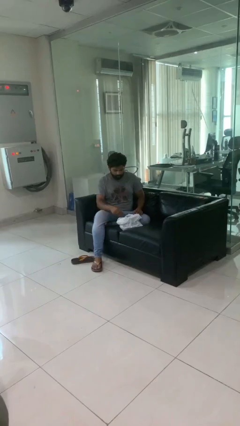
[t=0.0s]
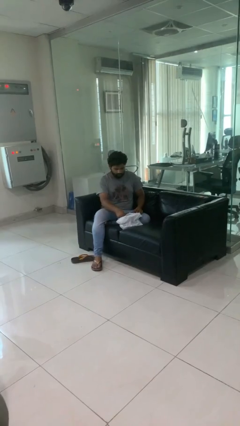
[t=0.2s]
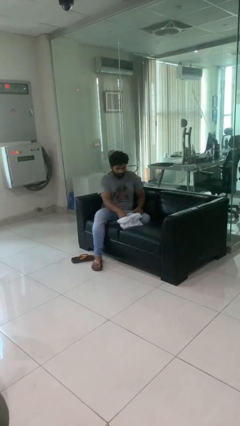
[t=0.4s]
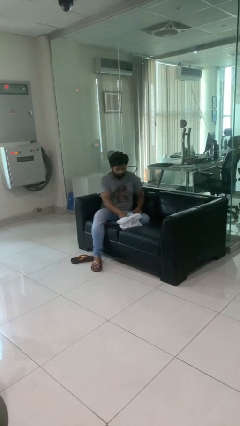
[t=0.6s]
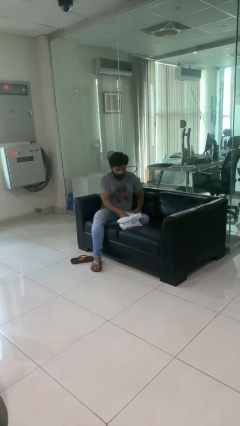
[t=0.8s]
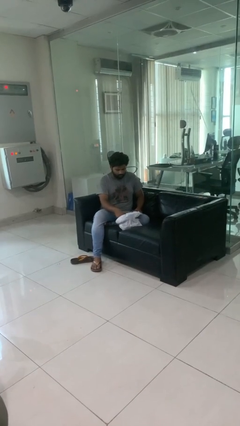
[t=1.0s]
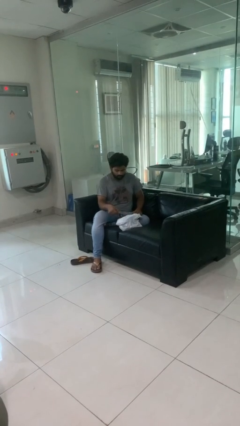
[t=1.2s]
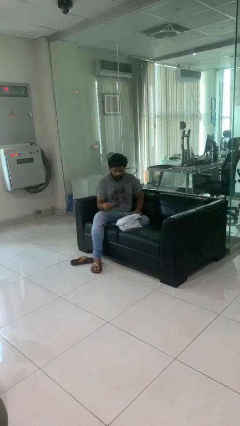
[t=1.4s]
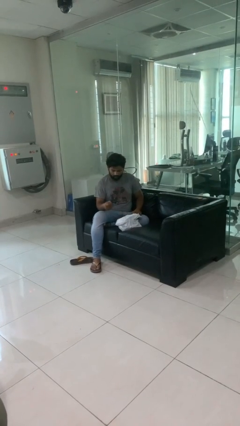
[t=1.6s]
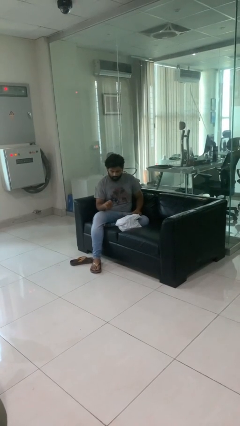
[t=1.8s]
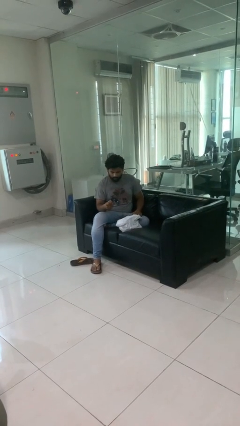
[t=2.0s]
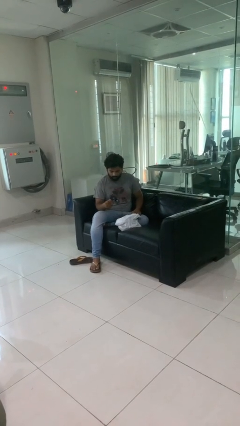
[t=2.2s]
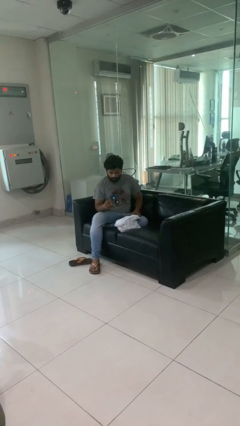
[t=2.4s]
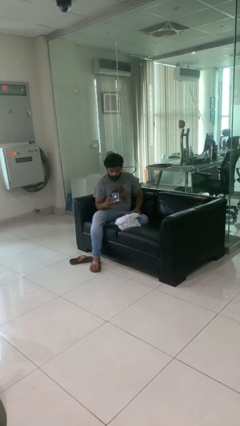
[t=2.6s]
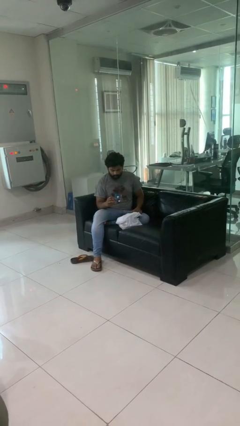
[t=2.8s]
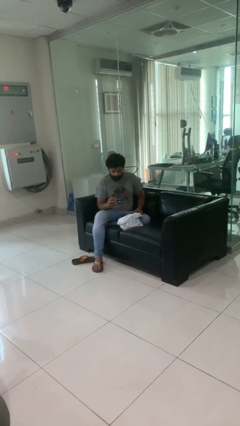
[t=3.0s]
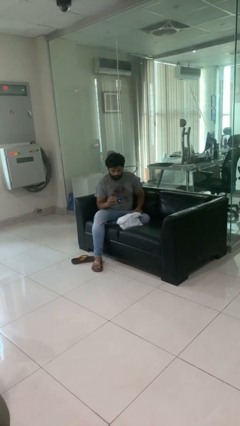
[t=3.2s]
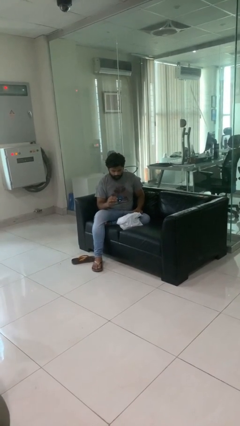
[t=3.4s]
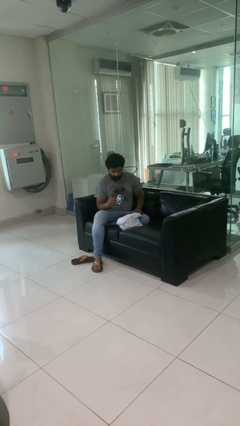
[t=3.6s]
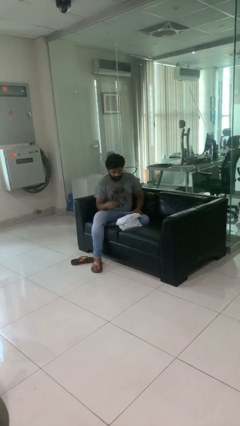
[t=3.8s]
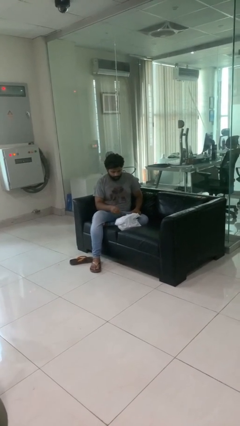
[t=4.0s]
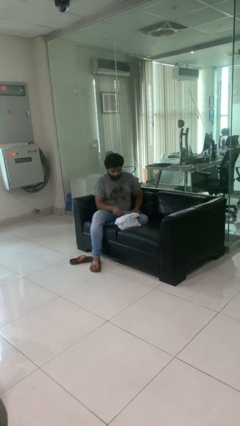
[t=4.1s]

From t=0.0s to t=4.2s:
person takes object from bag

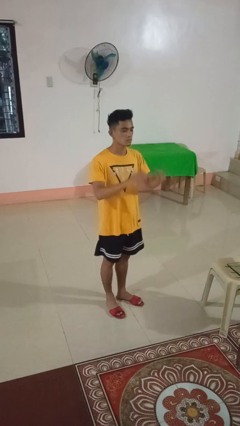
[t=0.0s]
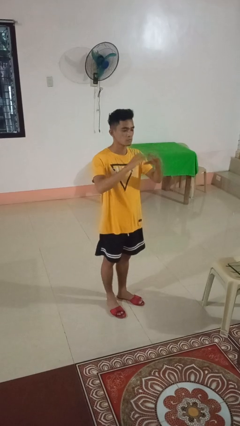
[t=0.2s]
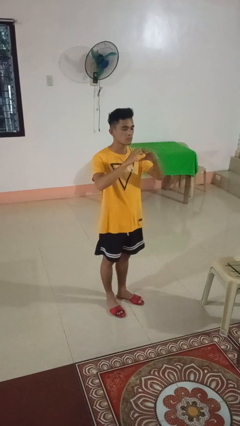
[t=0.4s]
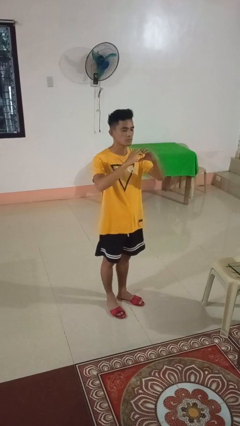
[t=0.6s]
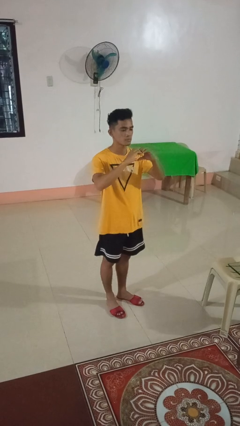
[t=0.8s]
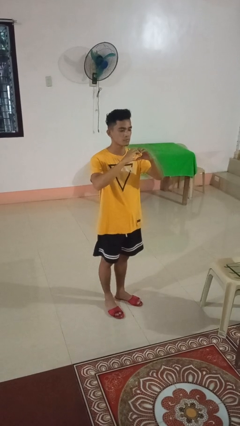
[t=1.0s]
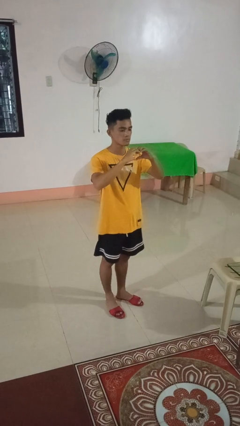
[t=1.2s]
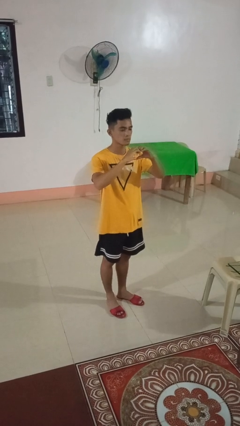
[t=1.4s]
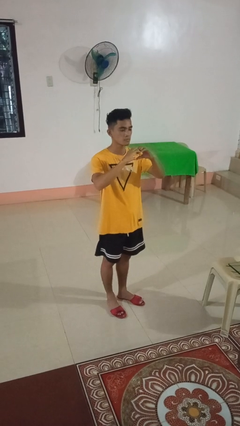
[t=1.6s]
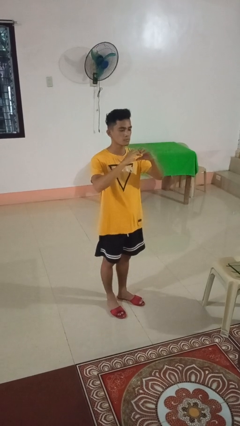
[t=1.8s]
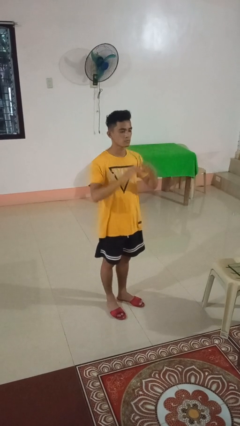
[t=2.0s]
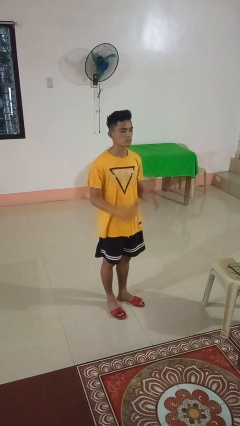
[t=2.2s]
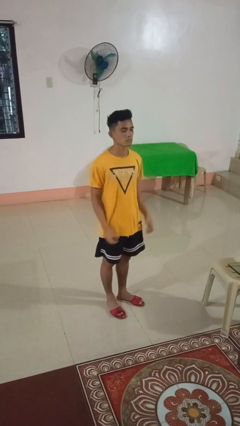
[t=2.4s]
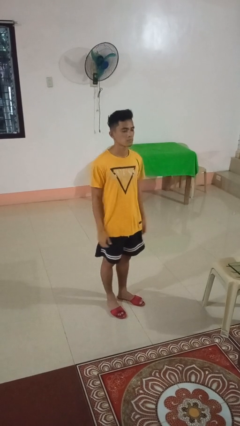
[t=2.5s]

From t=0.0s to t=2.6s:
person gestures heart

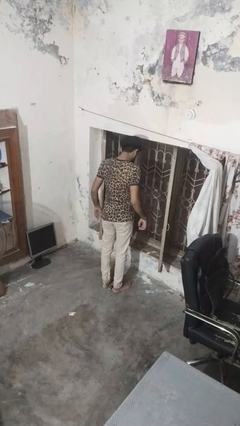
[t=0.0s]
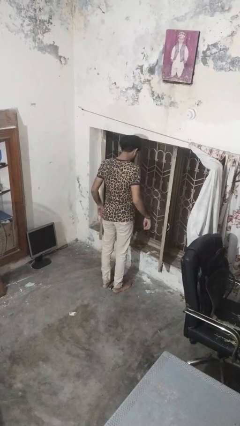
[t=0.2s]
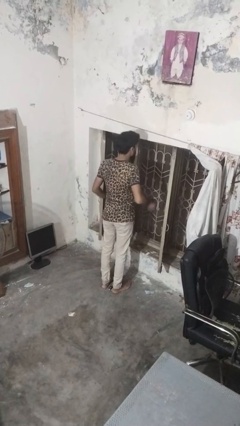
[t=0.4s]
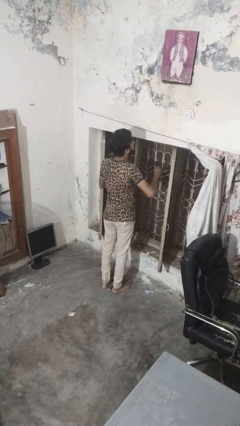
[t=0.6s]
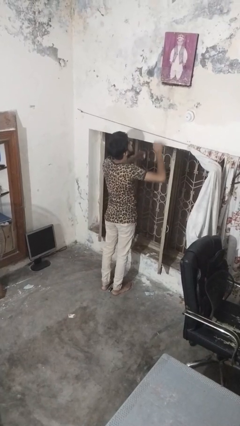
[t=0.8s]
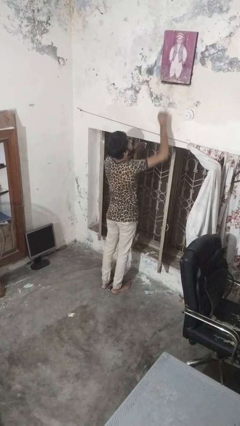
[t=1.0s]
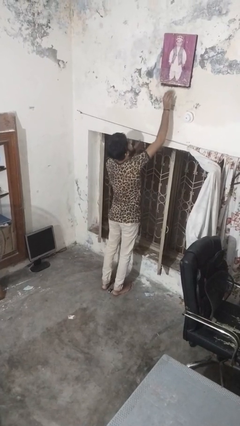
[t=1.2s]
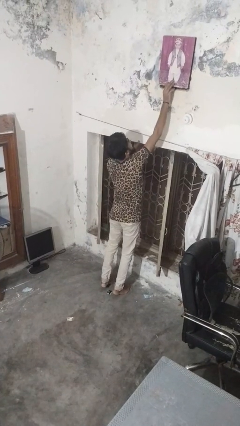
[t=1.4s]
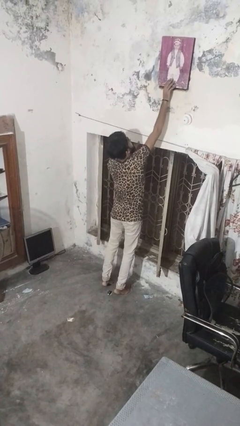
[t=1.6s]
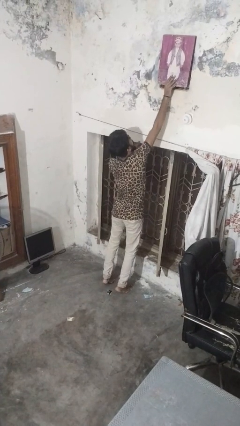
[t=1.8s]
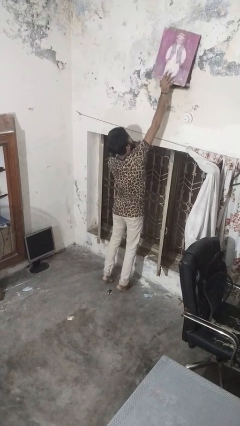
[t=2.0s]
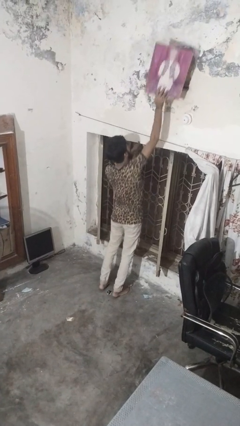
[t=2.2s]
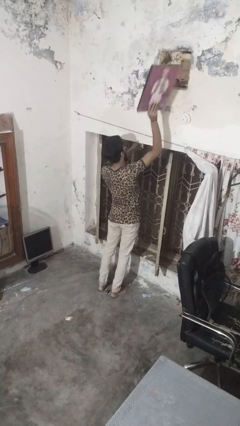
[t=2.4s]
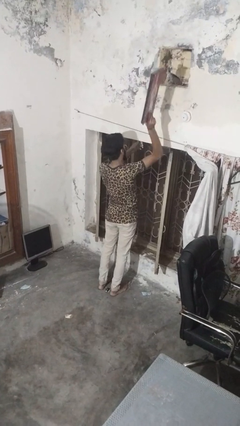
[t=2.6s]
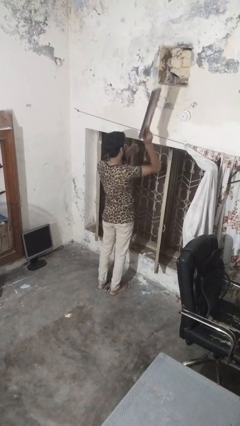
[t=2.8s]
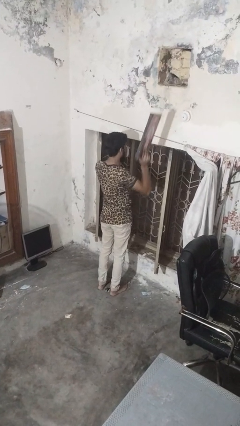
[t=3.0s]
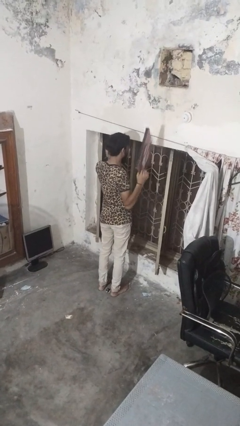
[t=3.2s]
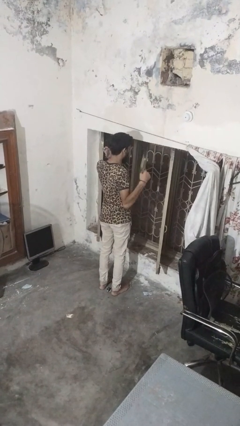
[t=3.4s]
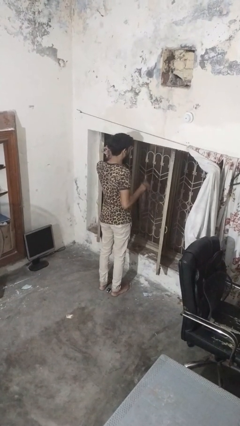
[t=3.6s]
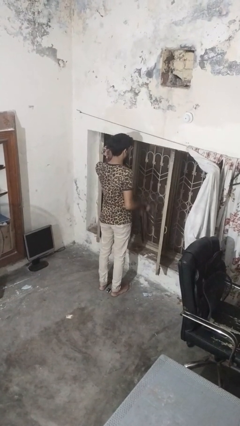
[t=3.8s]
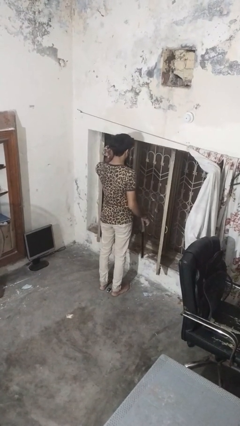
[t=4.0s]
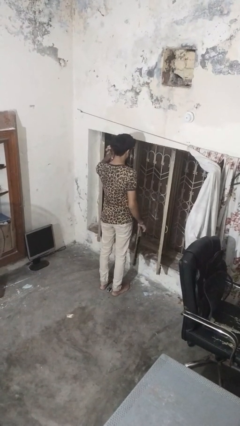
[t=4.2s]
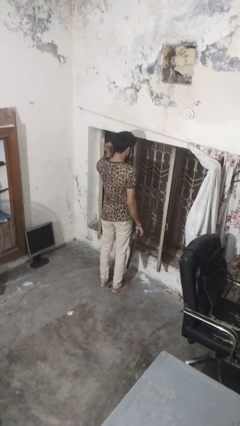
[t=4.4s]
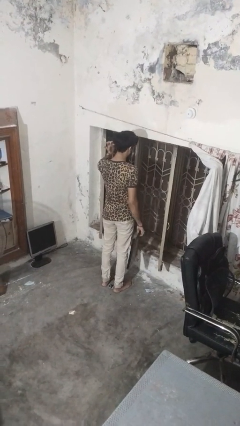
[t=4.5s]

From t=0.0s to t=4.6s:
person takes down picture frame

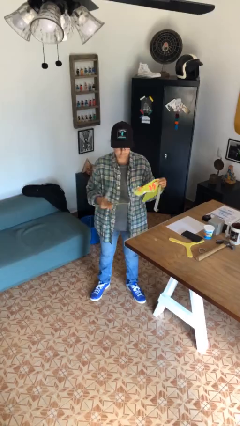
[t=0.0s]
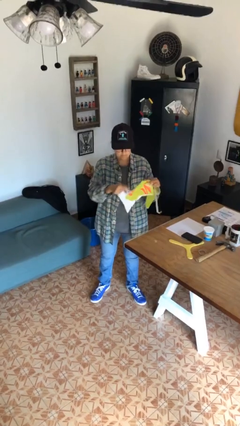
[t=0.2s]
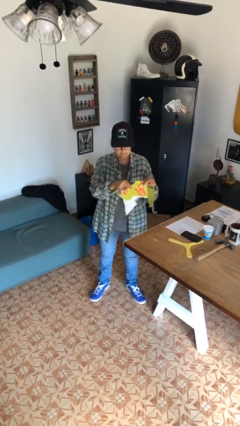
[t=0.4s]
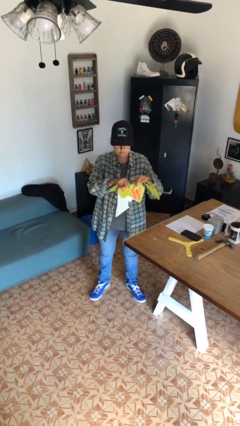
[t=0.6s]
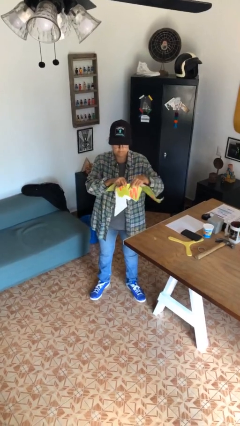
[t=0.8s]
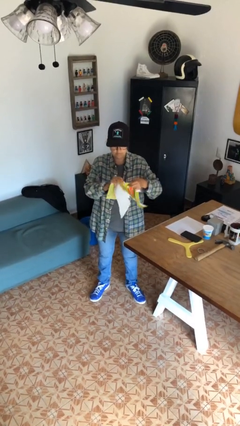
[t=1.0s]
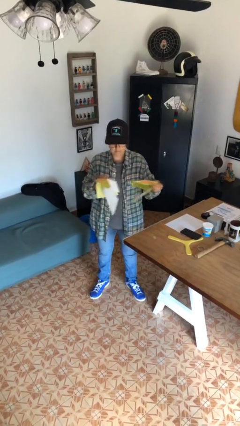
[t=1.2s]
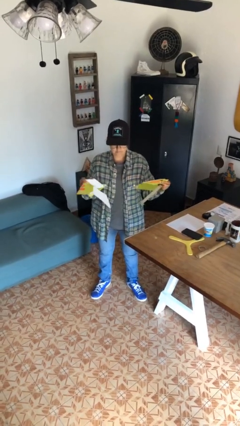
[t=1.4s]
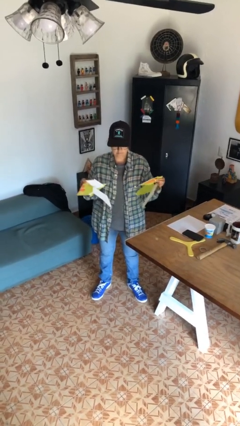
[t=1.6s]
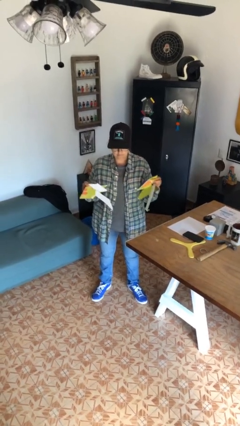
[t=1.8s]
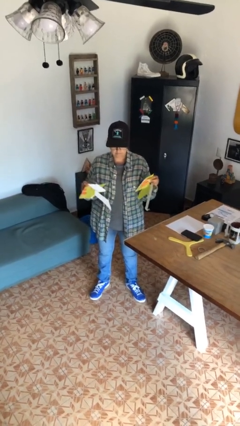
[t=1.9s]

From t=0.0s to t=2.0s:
person tears paper

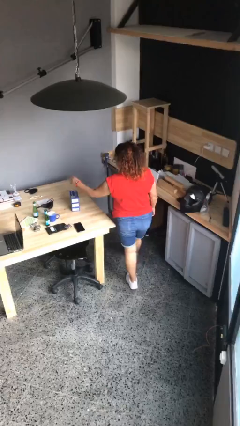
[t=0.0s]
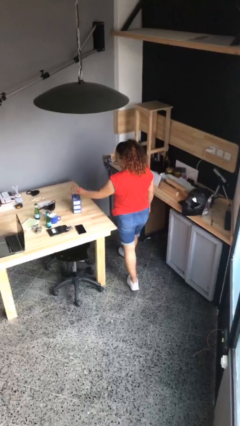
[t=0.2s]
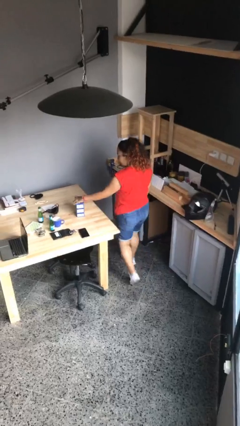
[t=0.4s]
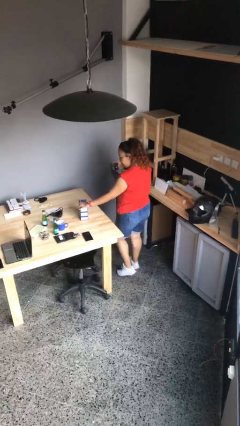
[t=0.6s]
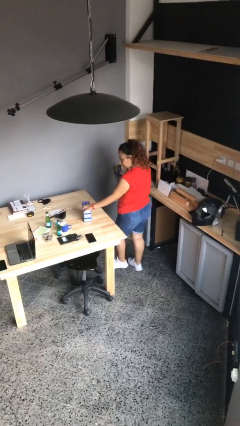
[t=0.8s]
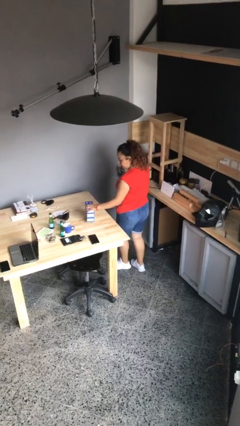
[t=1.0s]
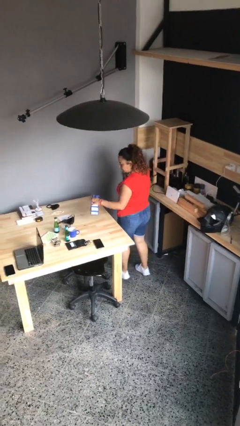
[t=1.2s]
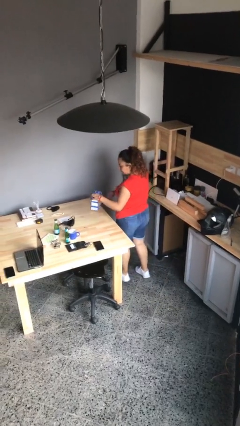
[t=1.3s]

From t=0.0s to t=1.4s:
person picks up object from table

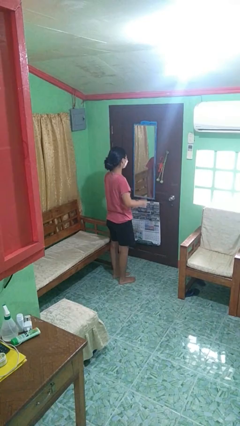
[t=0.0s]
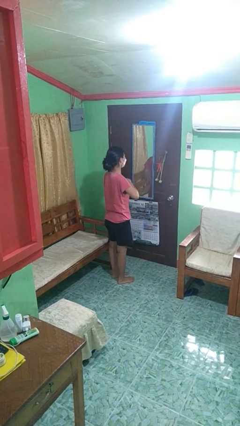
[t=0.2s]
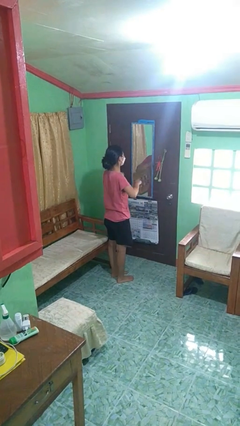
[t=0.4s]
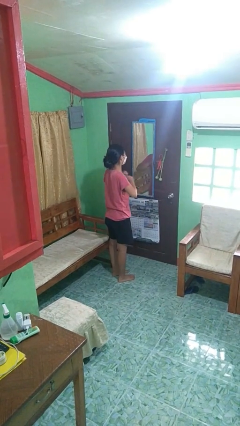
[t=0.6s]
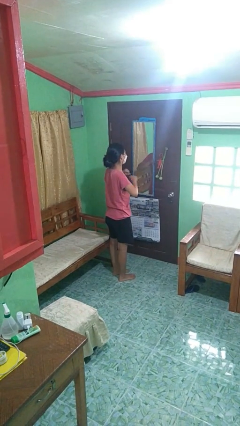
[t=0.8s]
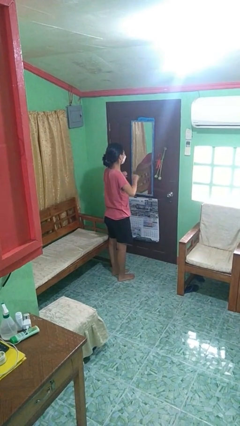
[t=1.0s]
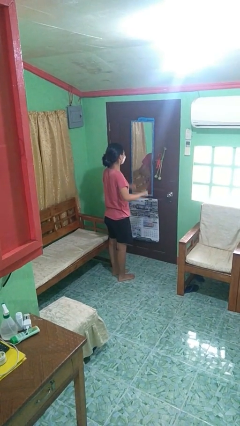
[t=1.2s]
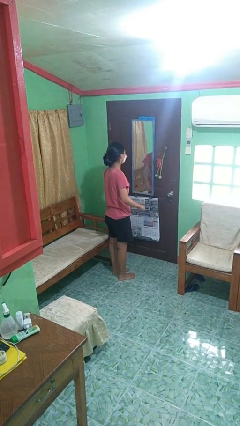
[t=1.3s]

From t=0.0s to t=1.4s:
person drums on chest

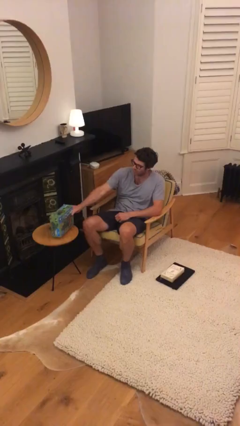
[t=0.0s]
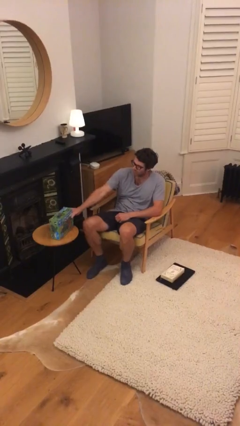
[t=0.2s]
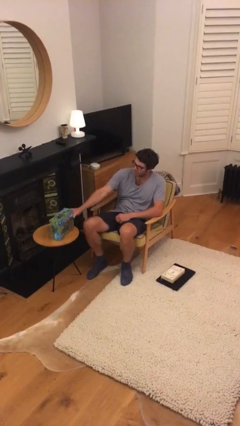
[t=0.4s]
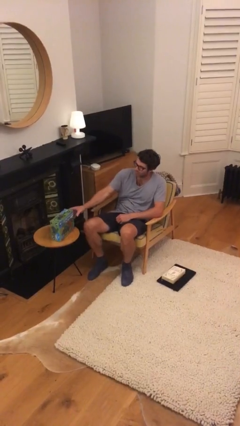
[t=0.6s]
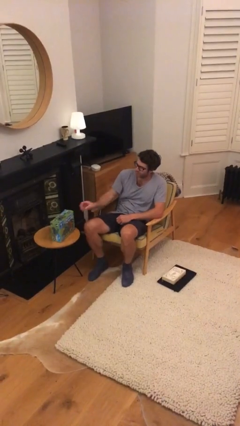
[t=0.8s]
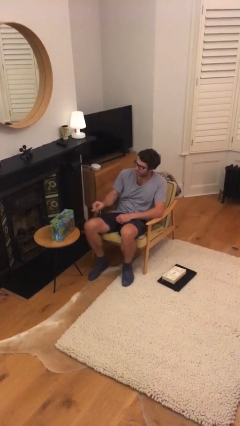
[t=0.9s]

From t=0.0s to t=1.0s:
person puts down object on table
